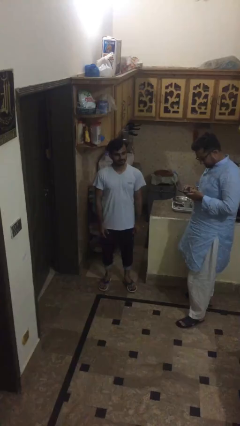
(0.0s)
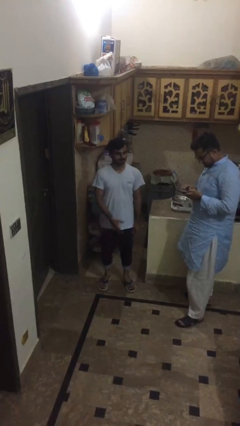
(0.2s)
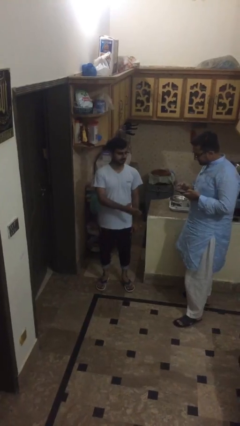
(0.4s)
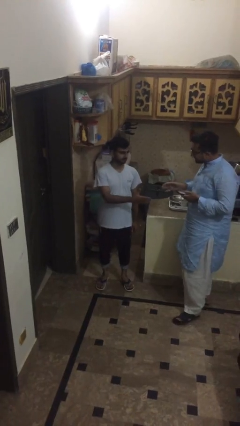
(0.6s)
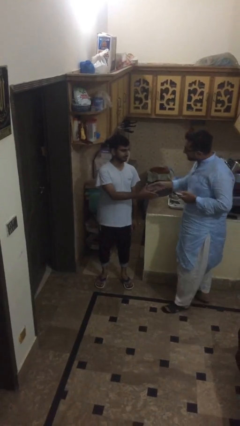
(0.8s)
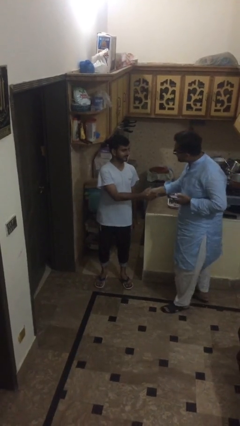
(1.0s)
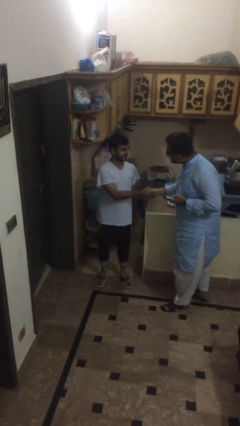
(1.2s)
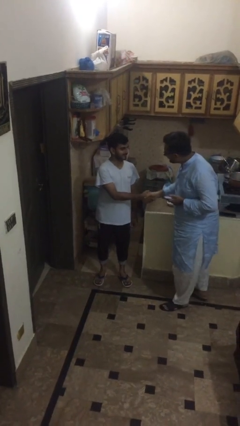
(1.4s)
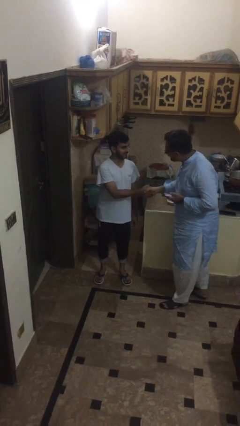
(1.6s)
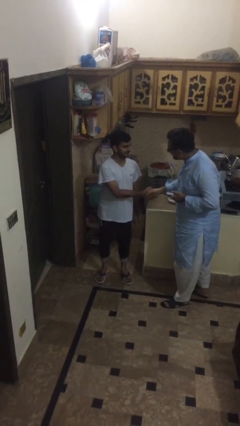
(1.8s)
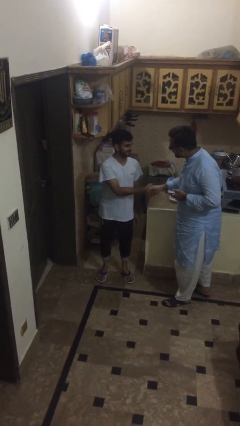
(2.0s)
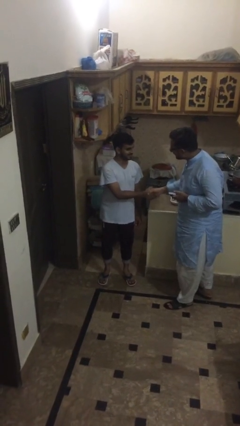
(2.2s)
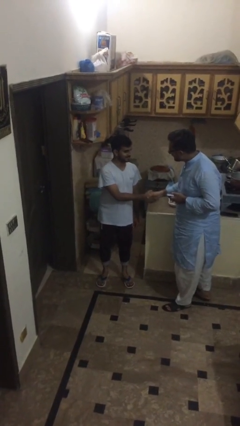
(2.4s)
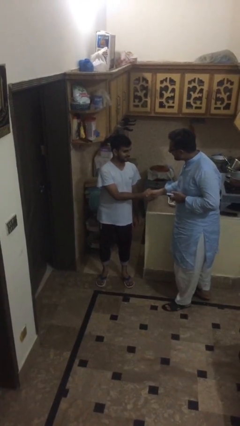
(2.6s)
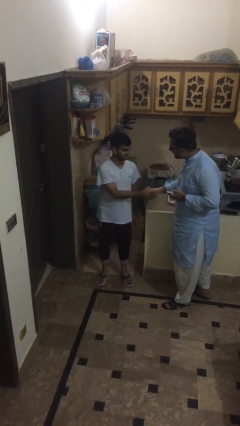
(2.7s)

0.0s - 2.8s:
person shakes hand

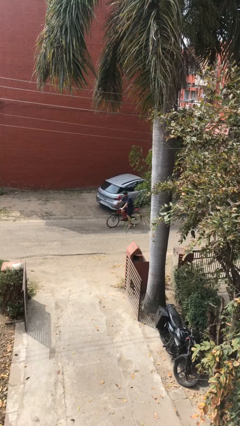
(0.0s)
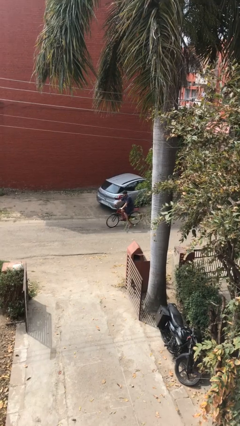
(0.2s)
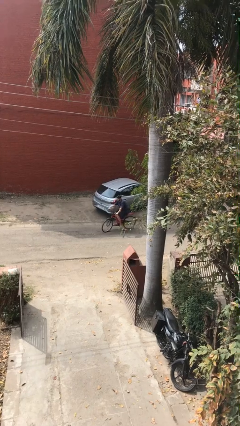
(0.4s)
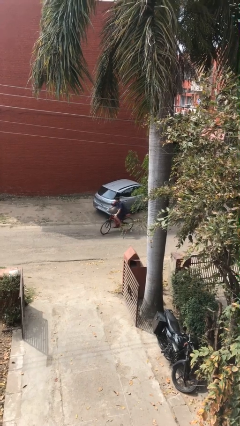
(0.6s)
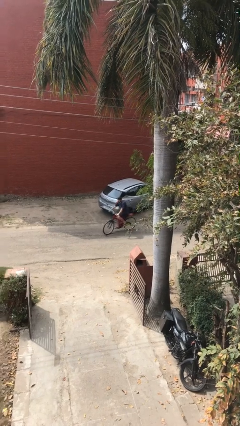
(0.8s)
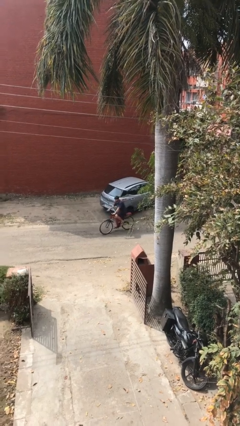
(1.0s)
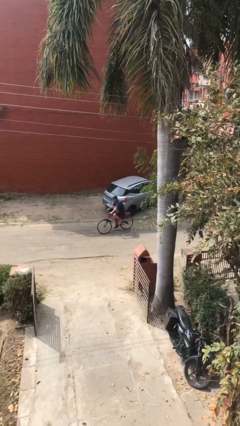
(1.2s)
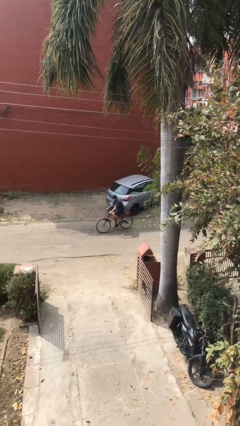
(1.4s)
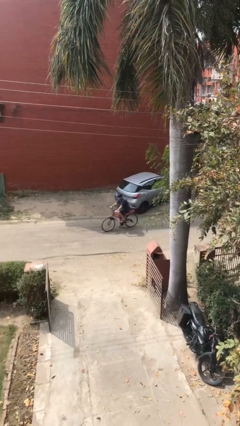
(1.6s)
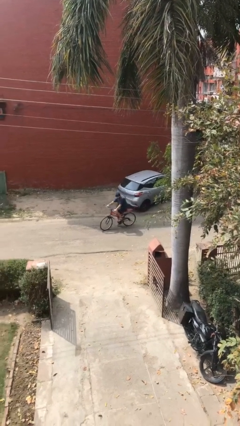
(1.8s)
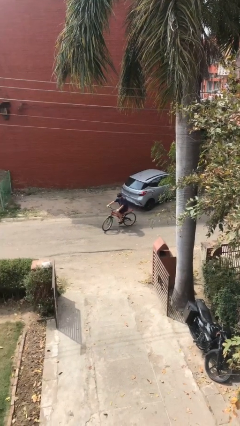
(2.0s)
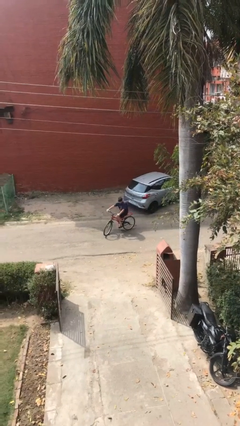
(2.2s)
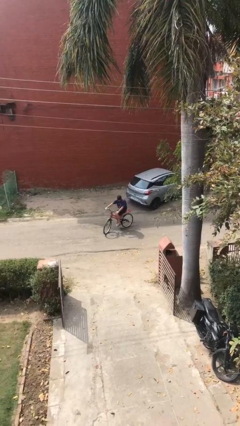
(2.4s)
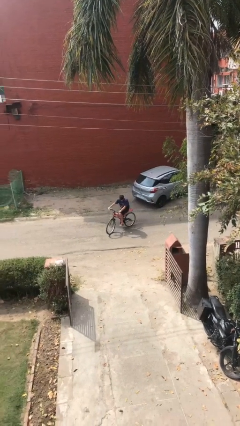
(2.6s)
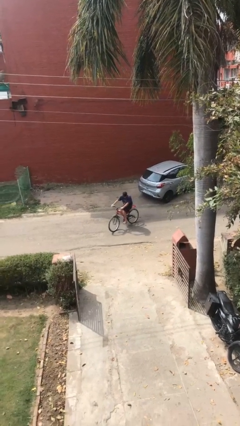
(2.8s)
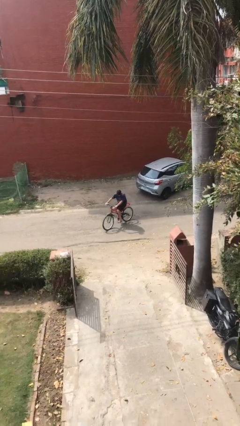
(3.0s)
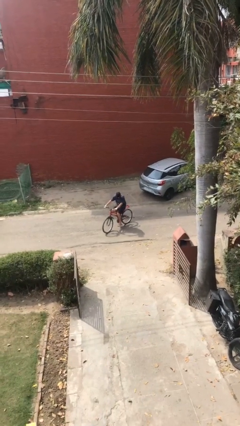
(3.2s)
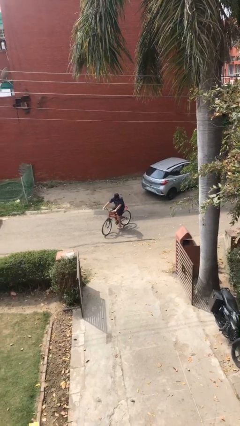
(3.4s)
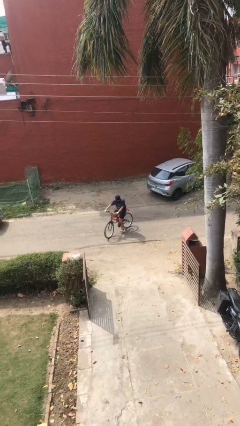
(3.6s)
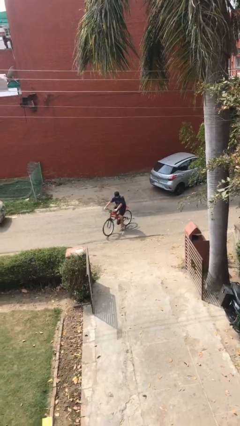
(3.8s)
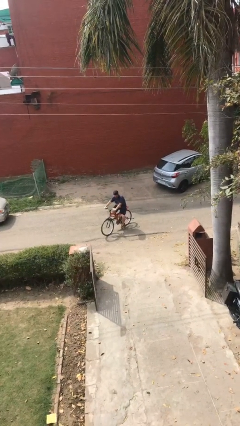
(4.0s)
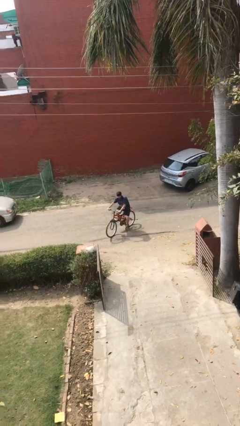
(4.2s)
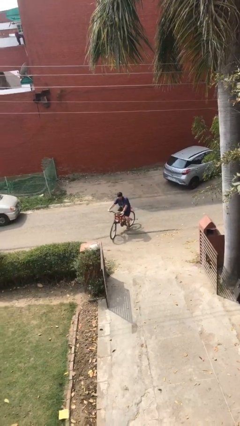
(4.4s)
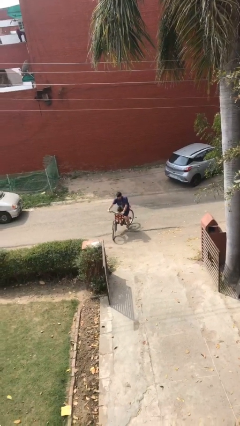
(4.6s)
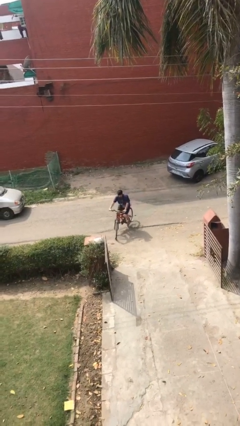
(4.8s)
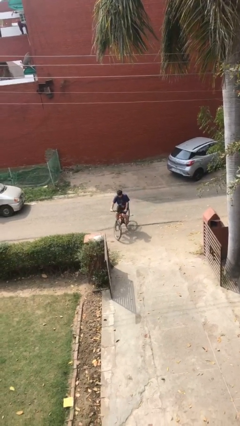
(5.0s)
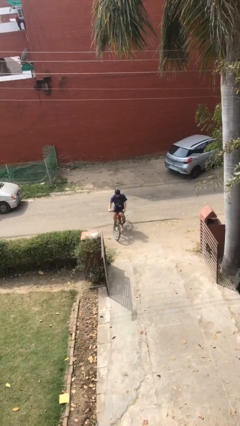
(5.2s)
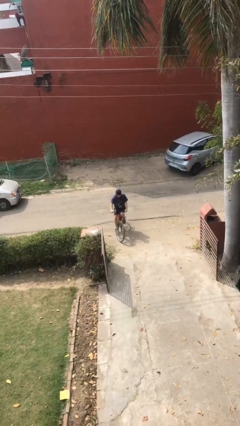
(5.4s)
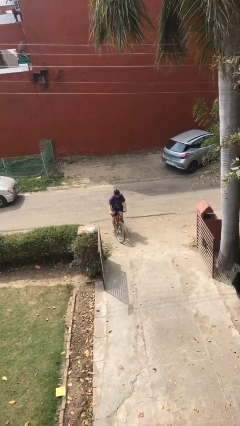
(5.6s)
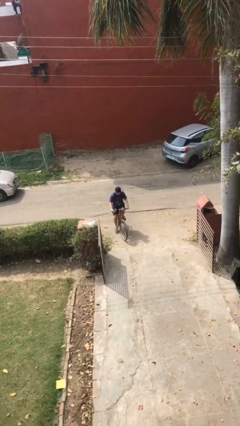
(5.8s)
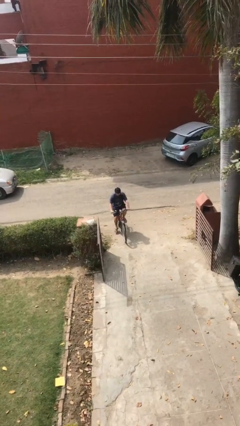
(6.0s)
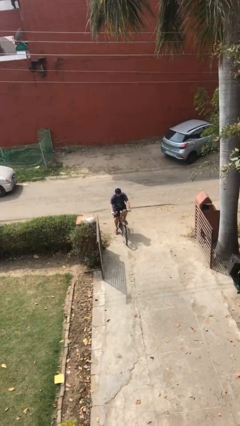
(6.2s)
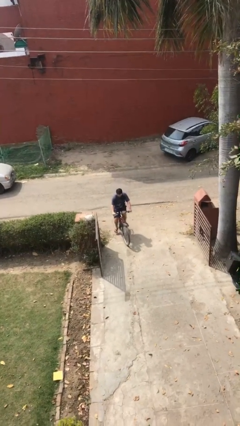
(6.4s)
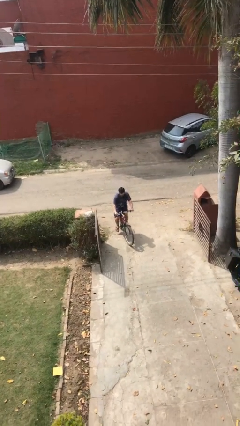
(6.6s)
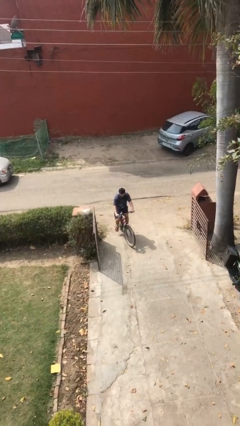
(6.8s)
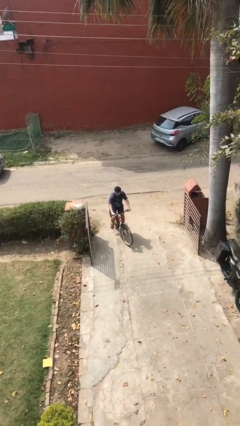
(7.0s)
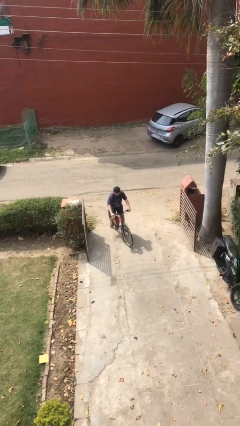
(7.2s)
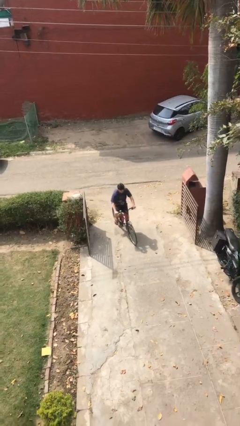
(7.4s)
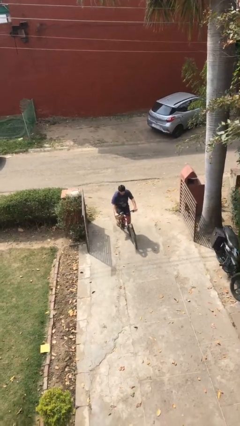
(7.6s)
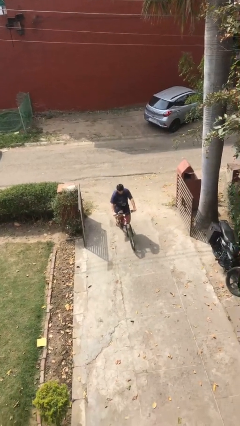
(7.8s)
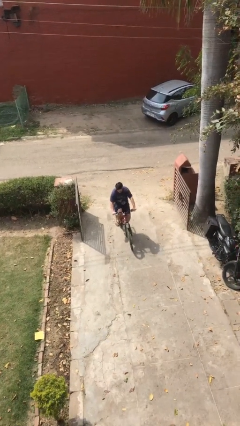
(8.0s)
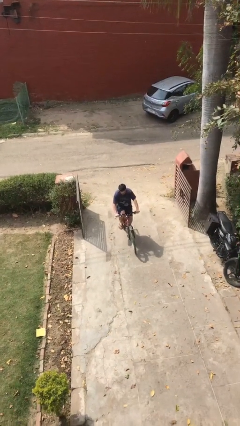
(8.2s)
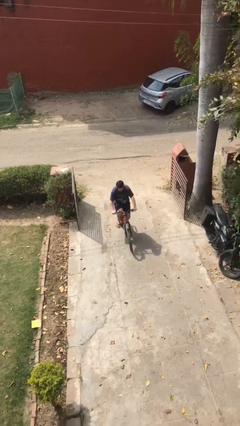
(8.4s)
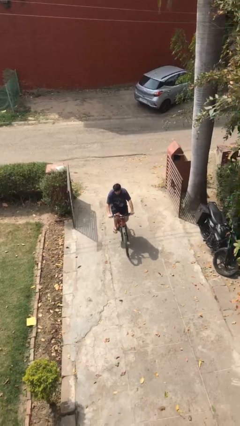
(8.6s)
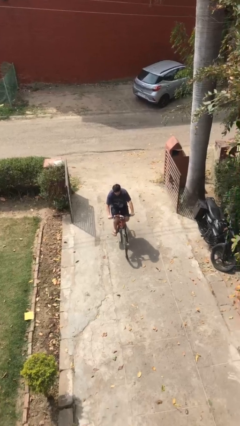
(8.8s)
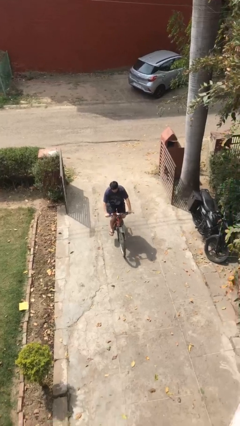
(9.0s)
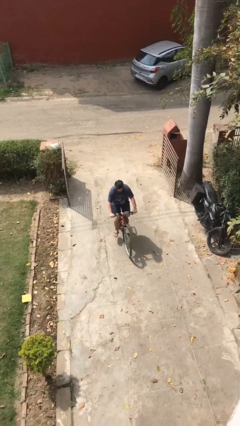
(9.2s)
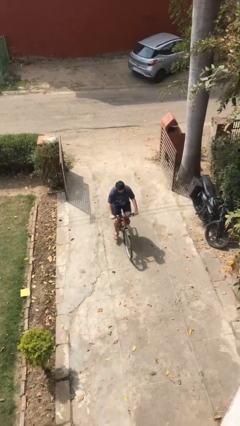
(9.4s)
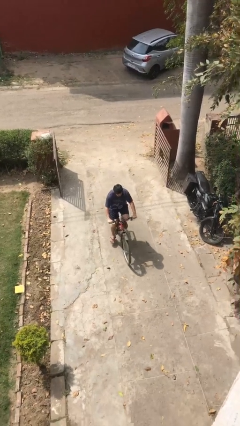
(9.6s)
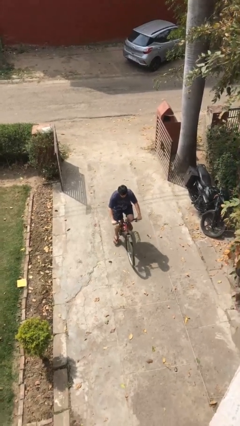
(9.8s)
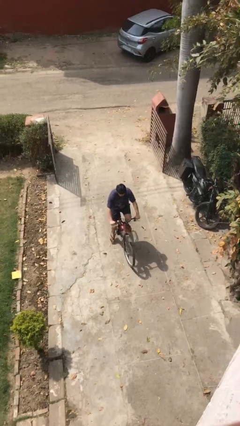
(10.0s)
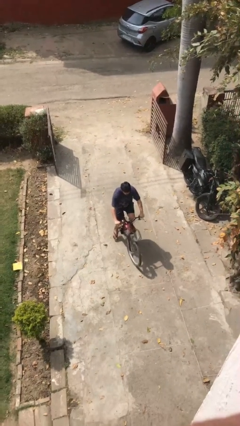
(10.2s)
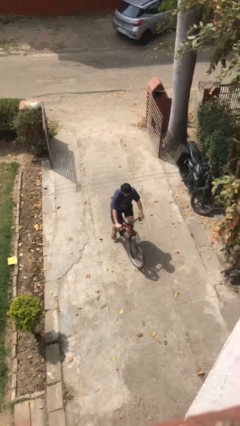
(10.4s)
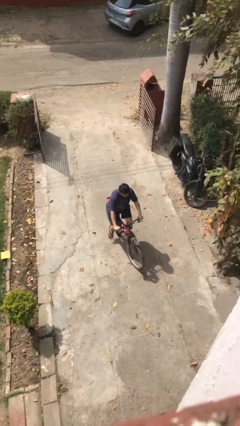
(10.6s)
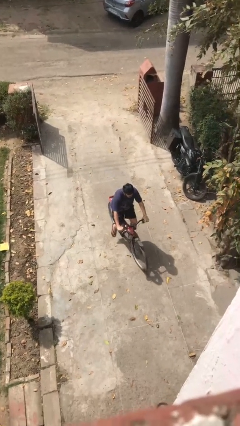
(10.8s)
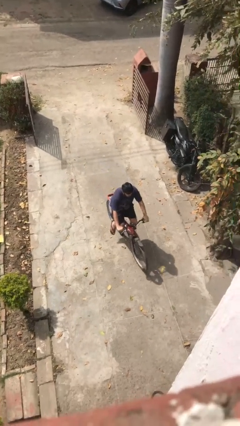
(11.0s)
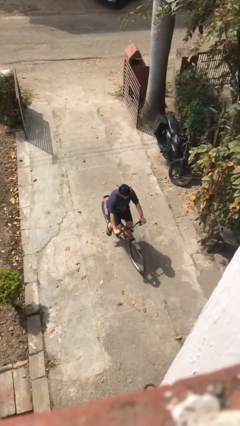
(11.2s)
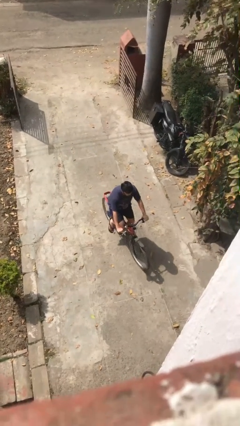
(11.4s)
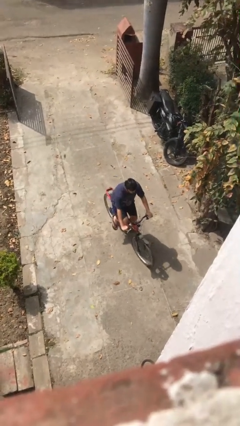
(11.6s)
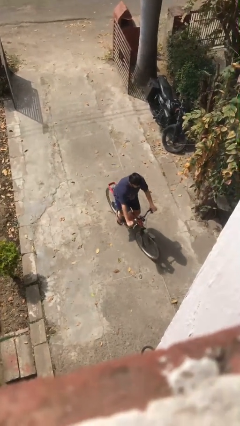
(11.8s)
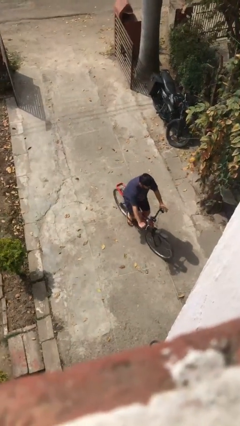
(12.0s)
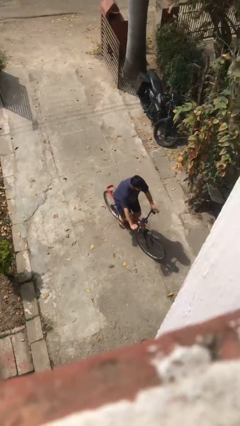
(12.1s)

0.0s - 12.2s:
person rides bicycle

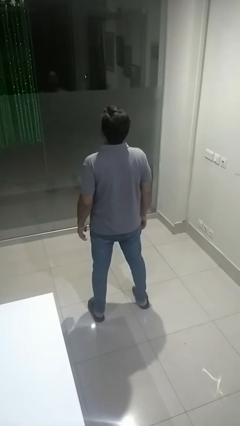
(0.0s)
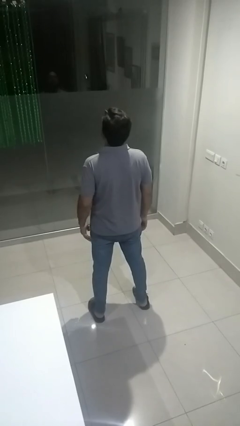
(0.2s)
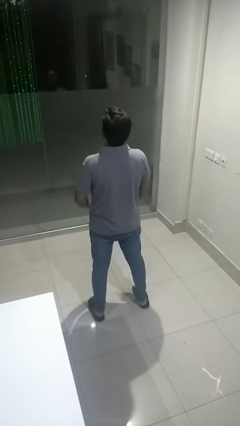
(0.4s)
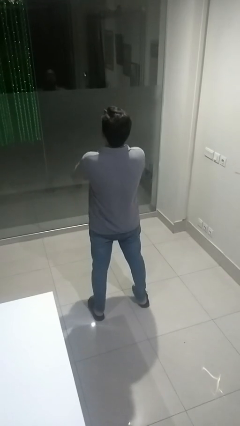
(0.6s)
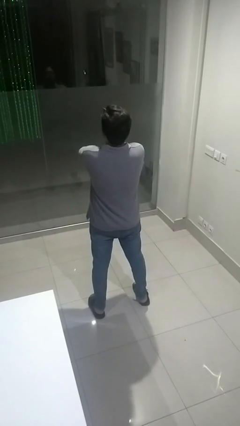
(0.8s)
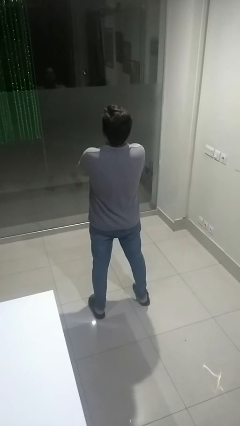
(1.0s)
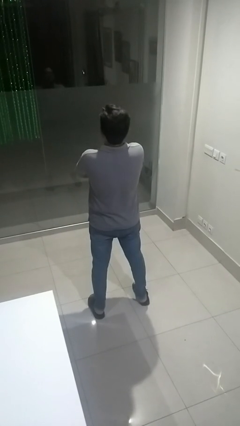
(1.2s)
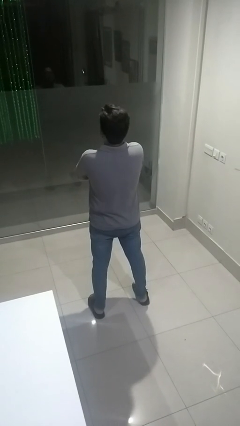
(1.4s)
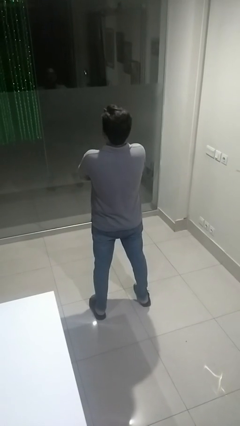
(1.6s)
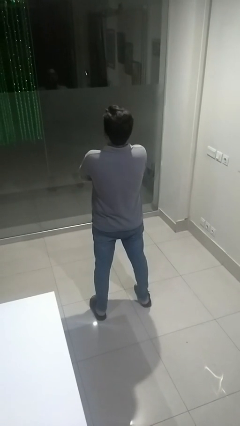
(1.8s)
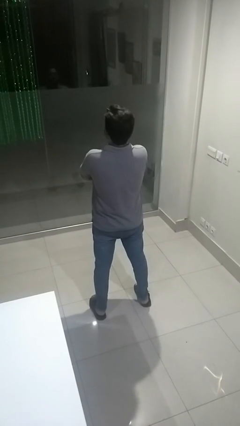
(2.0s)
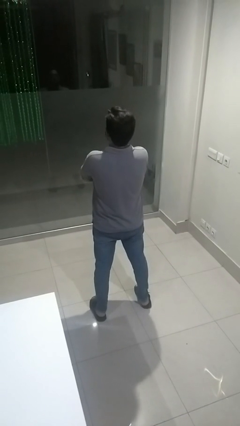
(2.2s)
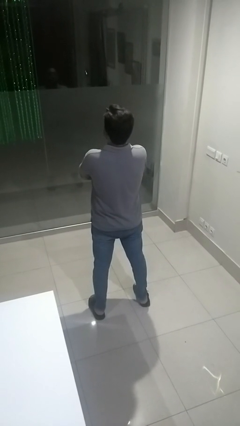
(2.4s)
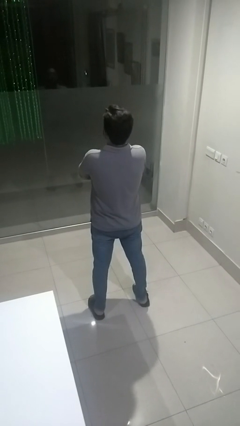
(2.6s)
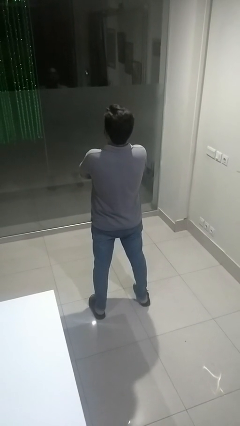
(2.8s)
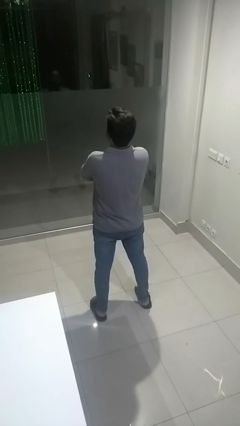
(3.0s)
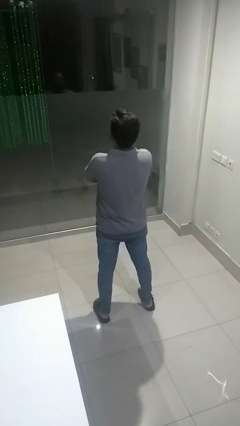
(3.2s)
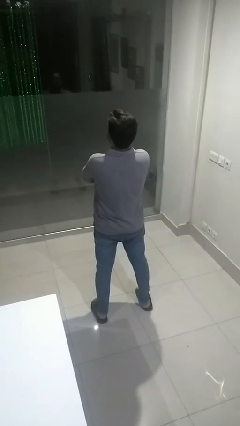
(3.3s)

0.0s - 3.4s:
person crosses arms
